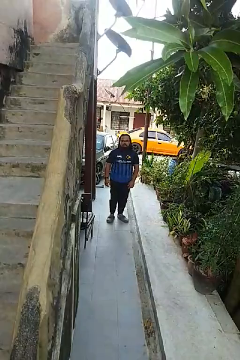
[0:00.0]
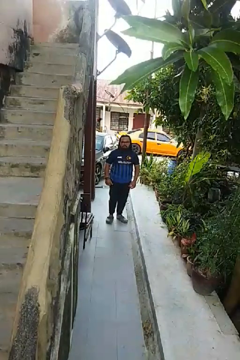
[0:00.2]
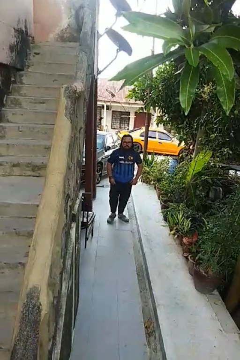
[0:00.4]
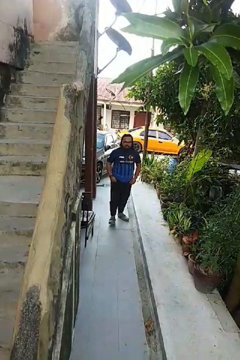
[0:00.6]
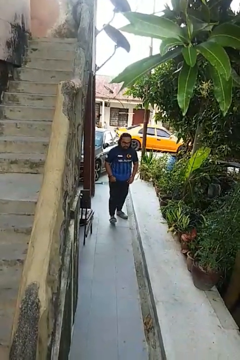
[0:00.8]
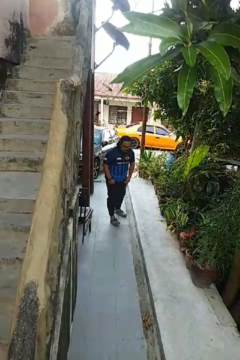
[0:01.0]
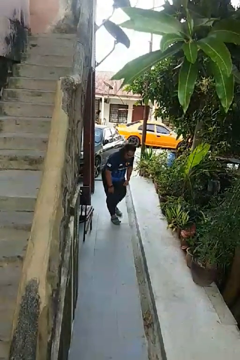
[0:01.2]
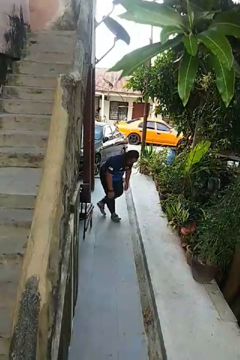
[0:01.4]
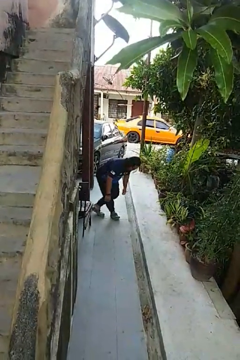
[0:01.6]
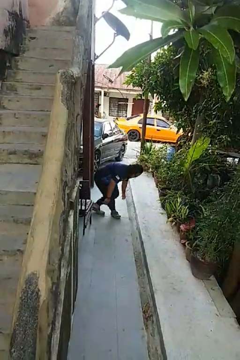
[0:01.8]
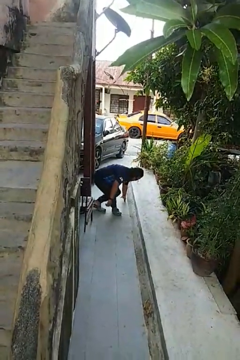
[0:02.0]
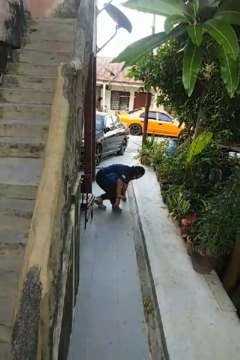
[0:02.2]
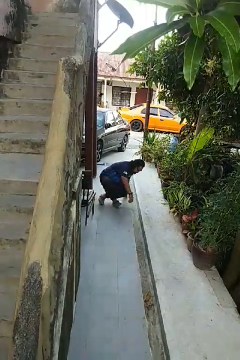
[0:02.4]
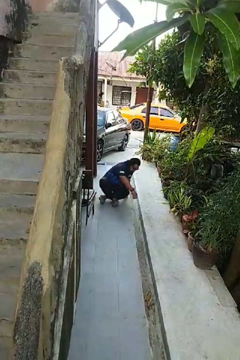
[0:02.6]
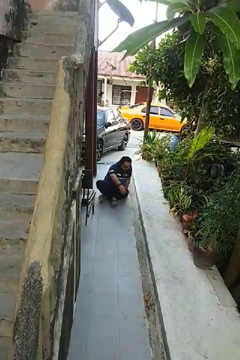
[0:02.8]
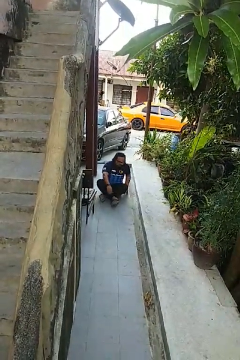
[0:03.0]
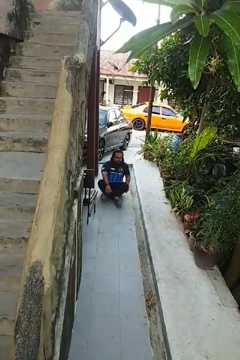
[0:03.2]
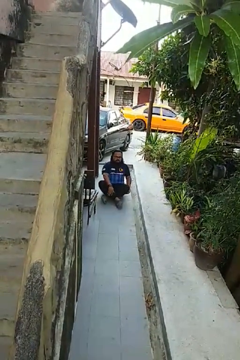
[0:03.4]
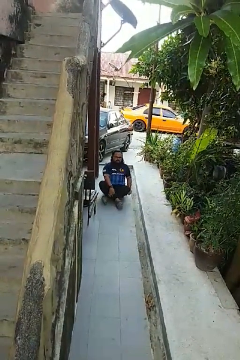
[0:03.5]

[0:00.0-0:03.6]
person sits crisscross

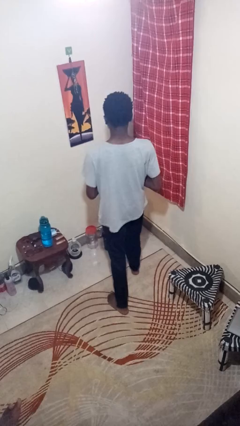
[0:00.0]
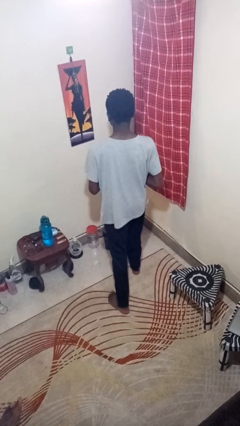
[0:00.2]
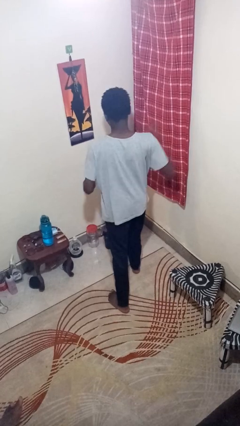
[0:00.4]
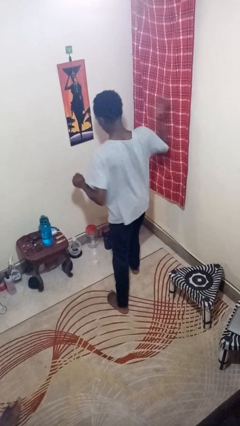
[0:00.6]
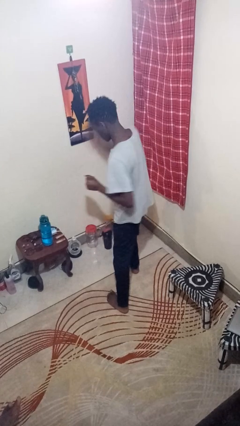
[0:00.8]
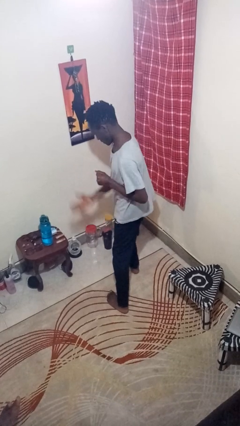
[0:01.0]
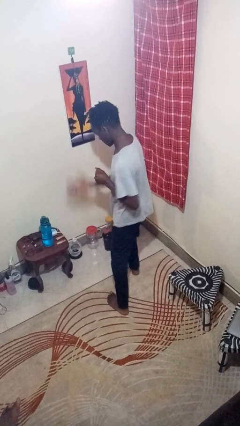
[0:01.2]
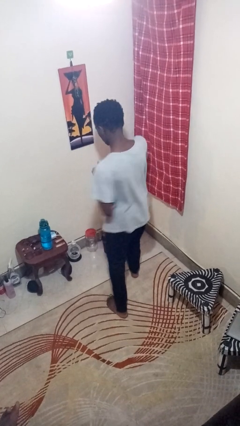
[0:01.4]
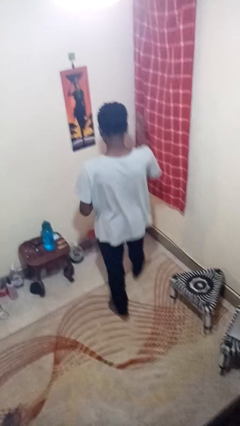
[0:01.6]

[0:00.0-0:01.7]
person karate chop

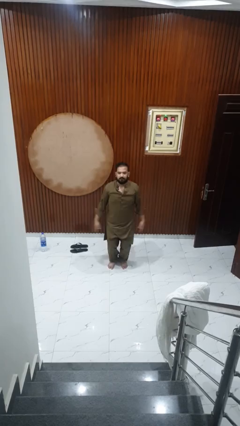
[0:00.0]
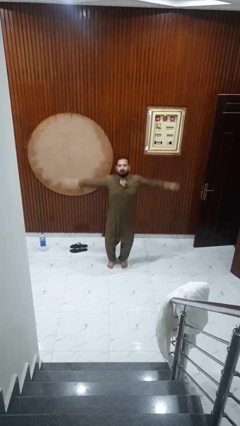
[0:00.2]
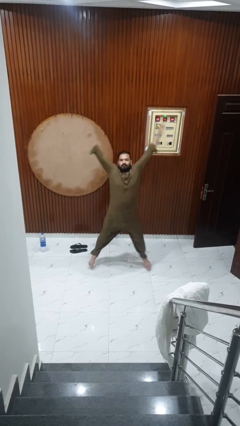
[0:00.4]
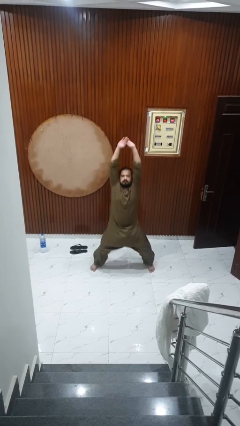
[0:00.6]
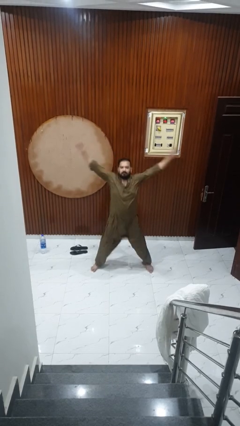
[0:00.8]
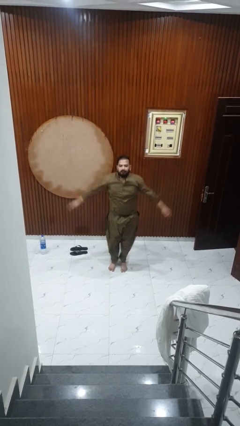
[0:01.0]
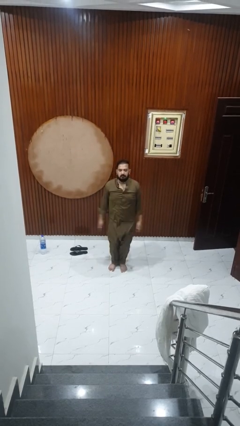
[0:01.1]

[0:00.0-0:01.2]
person exercises with jumping jacks

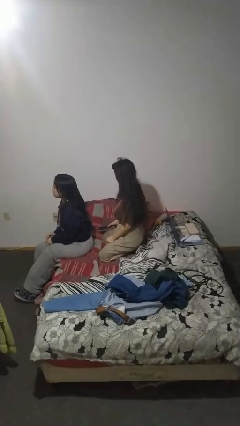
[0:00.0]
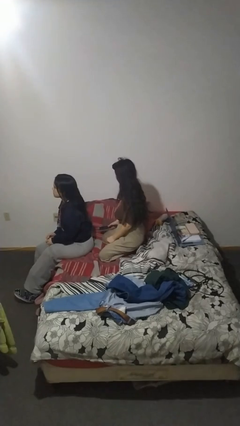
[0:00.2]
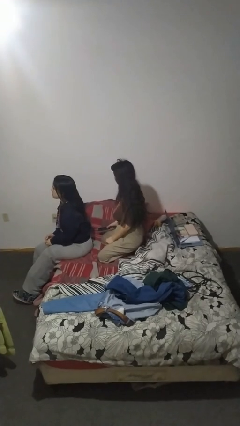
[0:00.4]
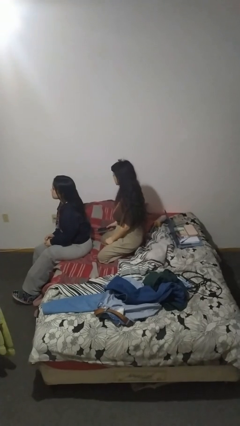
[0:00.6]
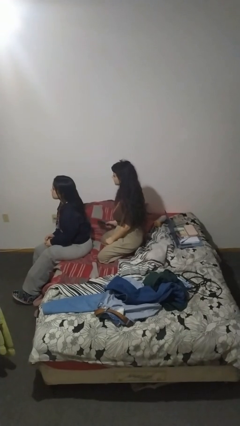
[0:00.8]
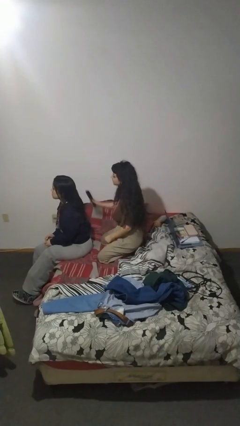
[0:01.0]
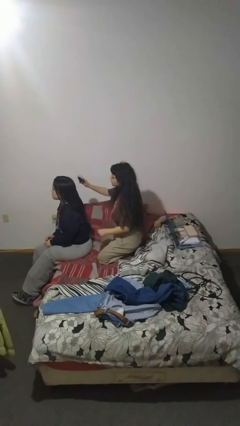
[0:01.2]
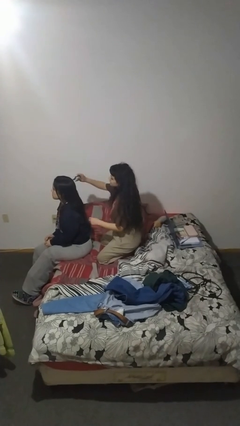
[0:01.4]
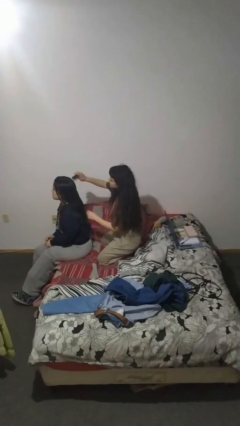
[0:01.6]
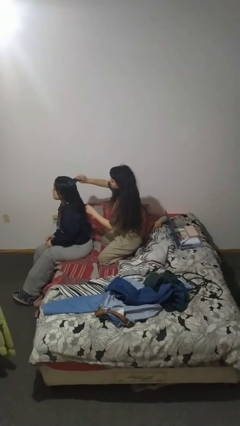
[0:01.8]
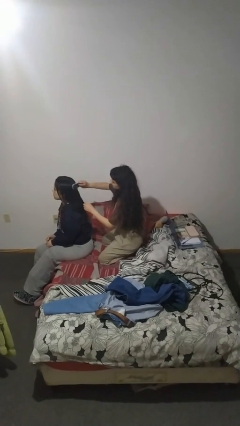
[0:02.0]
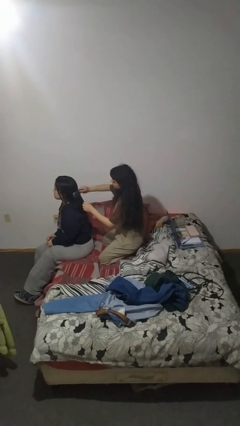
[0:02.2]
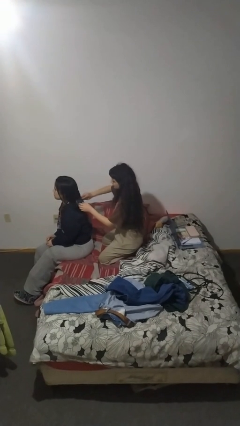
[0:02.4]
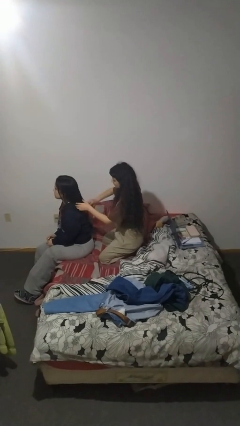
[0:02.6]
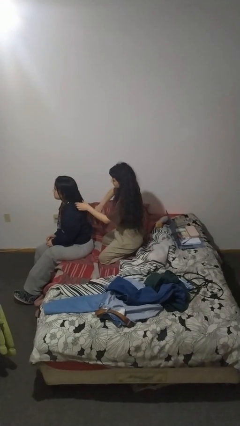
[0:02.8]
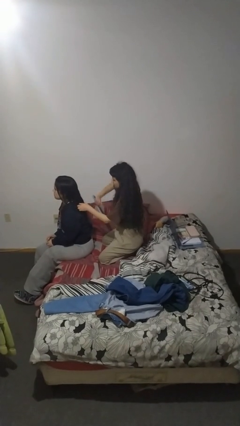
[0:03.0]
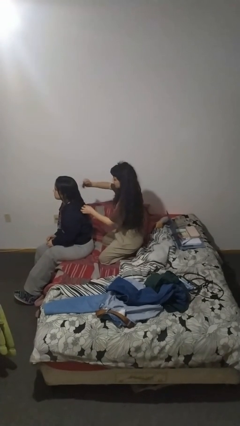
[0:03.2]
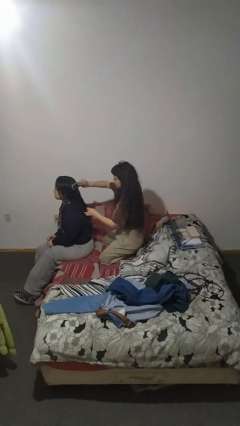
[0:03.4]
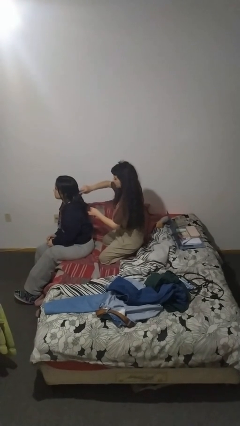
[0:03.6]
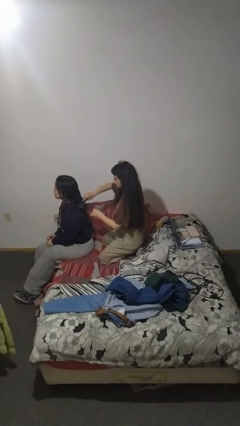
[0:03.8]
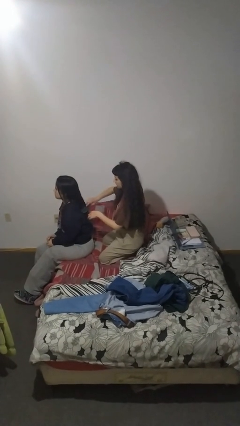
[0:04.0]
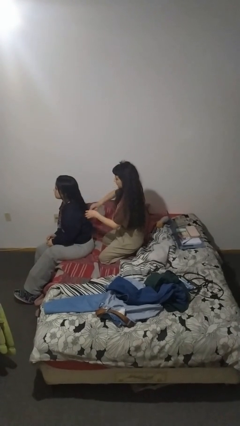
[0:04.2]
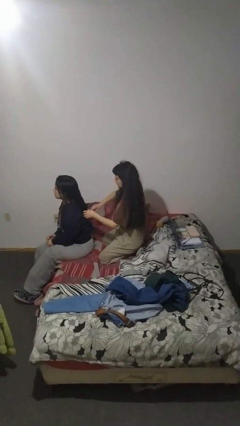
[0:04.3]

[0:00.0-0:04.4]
person brushes hair of person

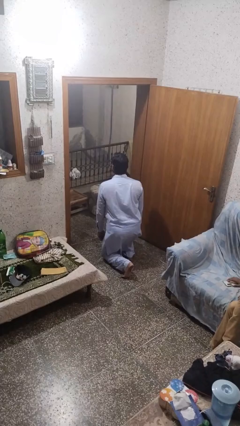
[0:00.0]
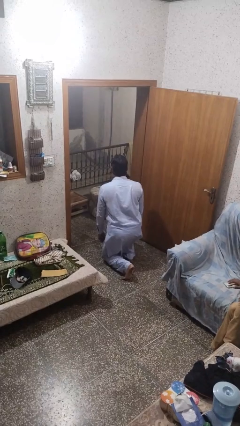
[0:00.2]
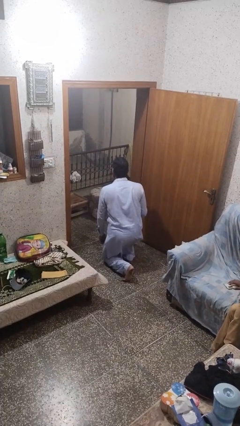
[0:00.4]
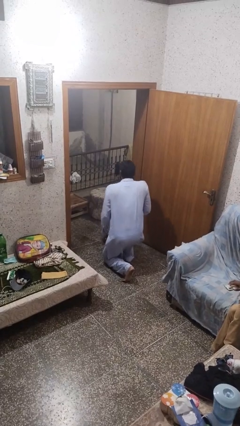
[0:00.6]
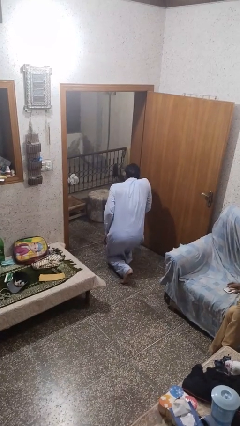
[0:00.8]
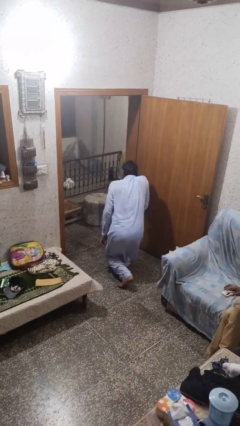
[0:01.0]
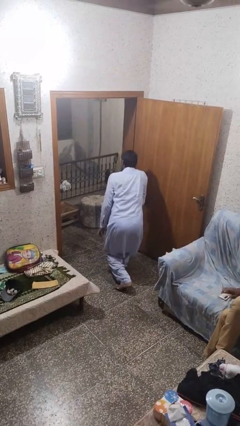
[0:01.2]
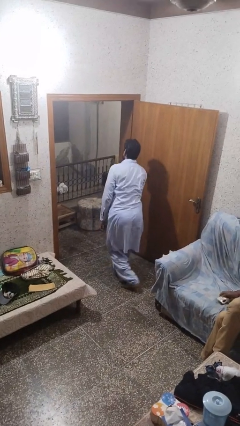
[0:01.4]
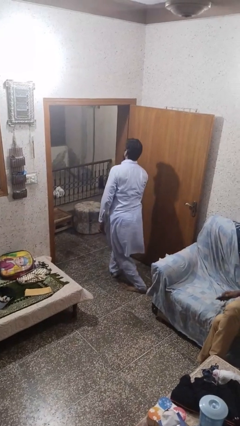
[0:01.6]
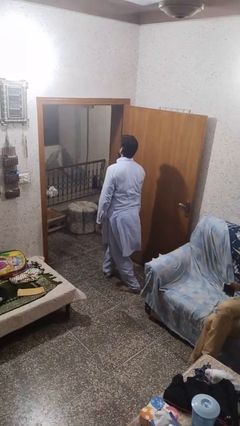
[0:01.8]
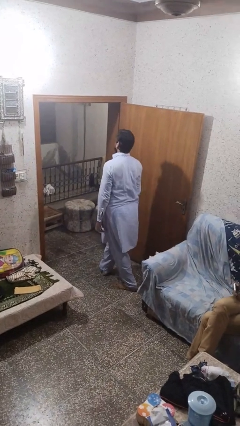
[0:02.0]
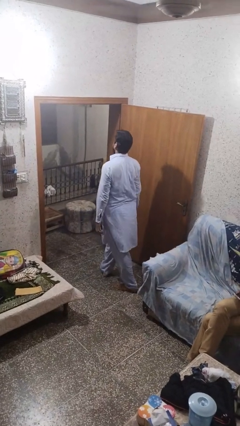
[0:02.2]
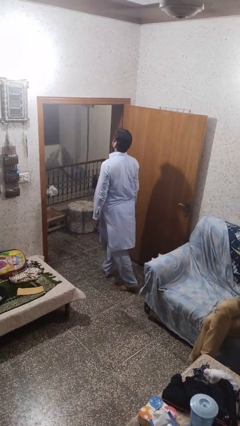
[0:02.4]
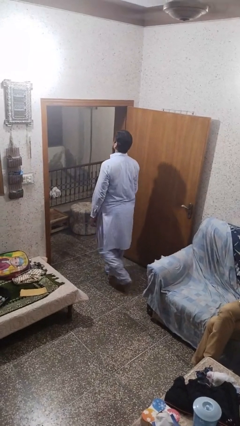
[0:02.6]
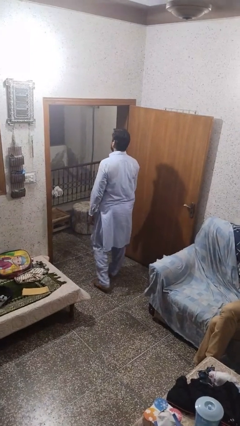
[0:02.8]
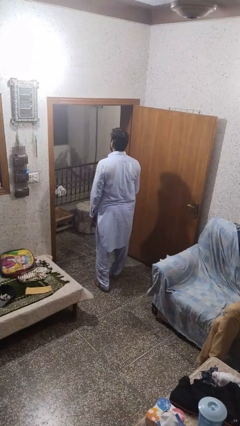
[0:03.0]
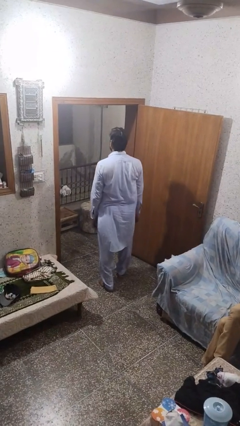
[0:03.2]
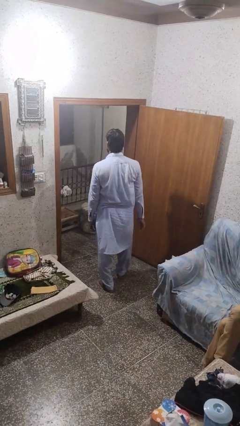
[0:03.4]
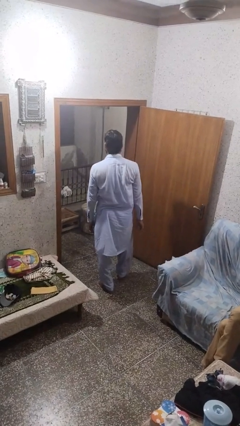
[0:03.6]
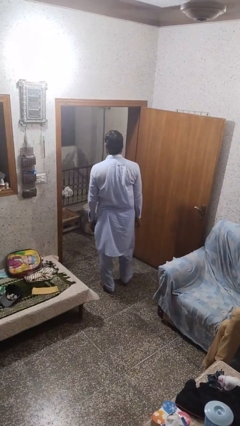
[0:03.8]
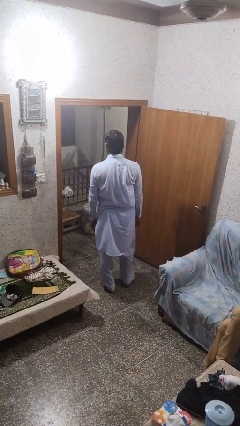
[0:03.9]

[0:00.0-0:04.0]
person stands up from floor

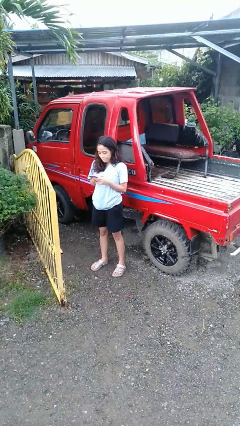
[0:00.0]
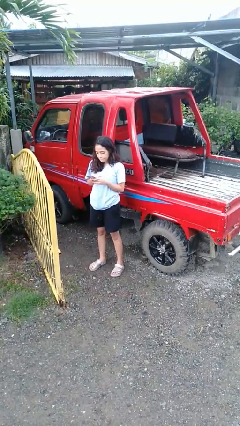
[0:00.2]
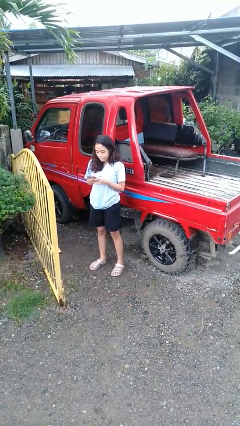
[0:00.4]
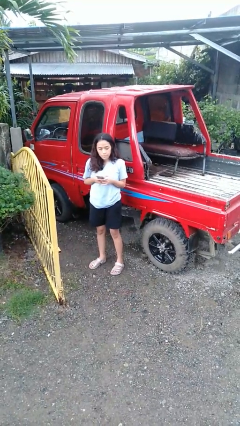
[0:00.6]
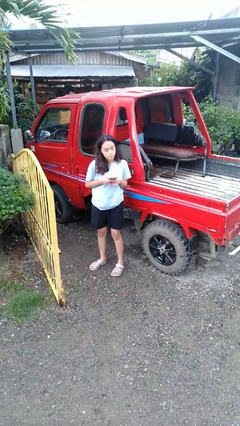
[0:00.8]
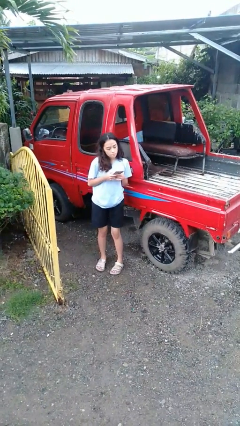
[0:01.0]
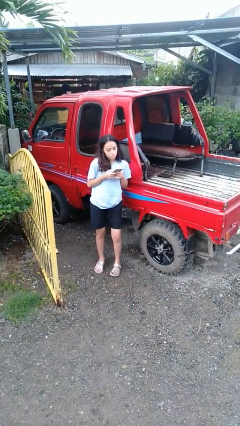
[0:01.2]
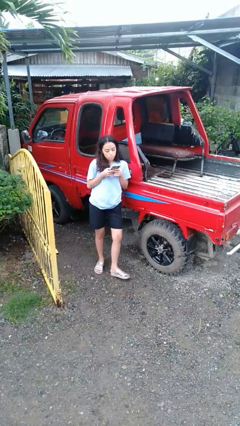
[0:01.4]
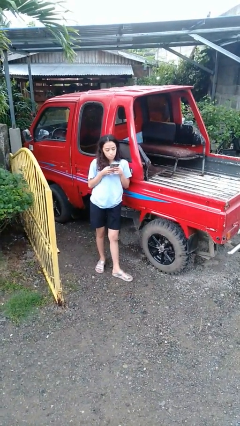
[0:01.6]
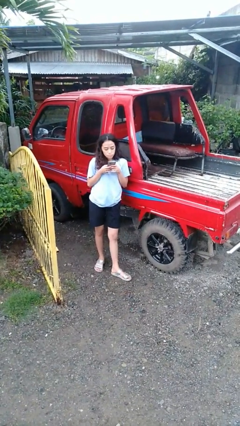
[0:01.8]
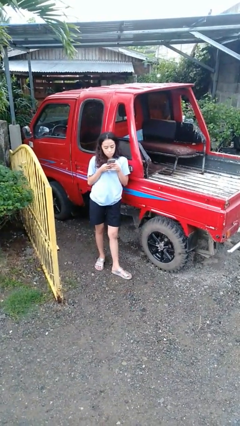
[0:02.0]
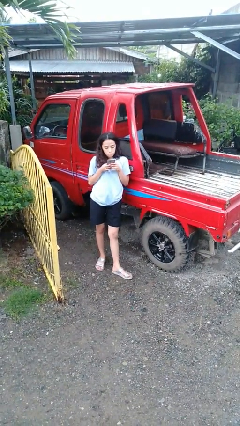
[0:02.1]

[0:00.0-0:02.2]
person leans against car

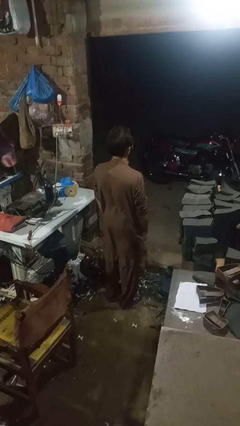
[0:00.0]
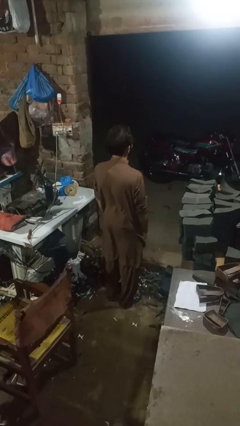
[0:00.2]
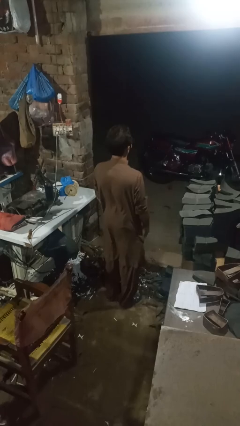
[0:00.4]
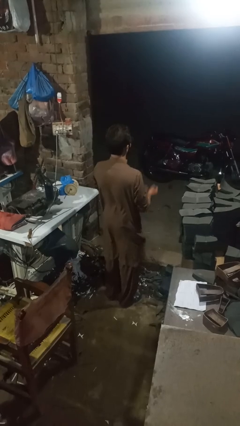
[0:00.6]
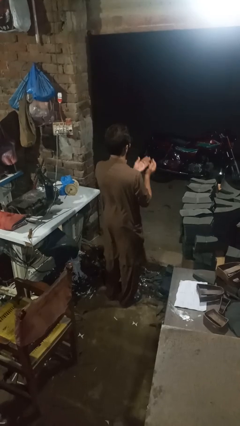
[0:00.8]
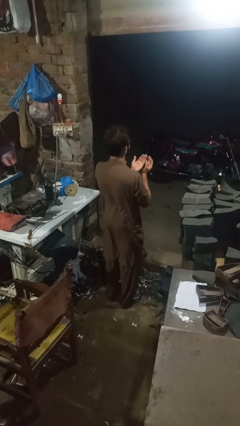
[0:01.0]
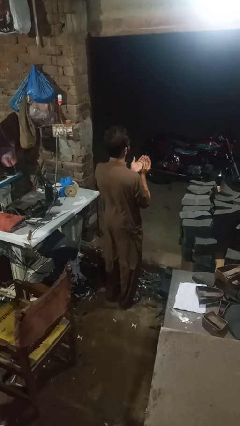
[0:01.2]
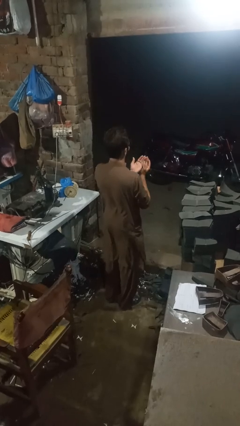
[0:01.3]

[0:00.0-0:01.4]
person prays
